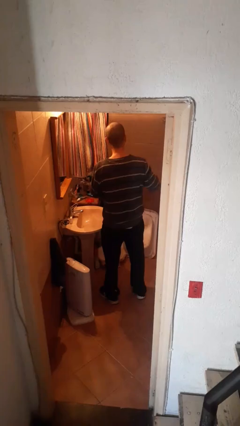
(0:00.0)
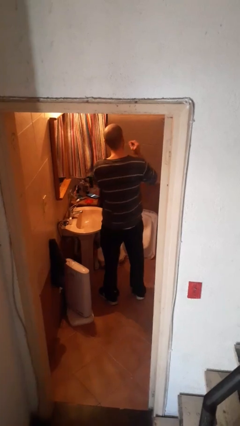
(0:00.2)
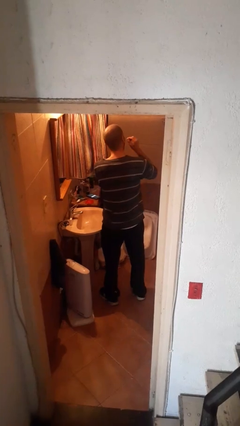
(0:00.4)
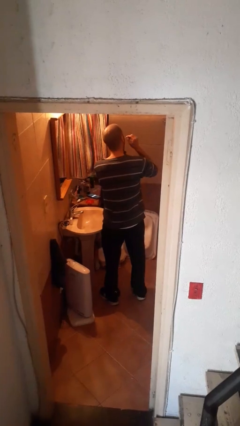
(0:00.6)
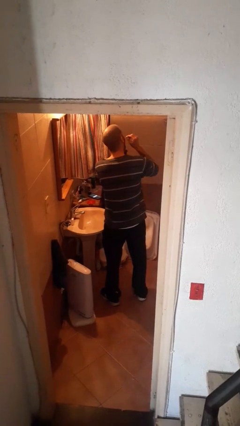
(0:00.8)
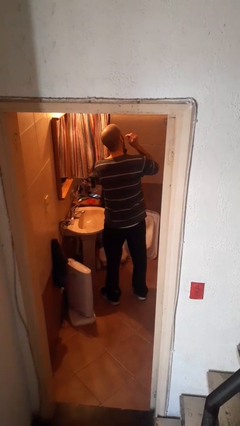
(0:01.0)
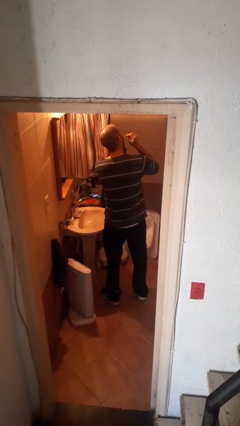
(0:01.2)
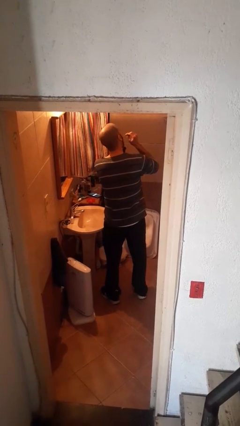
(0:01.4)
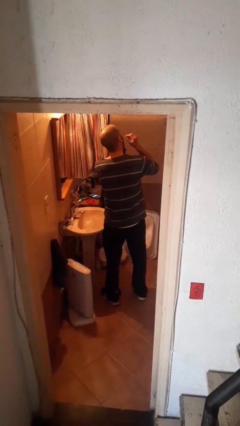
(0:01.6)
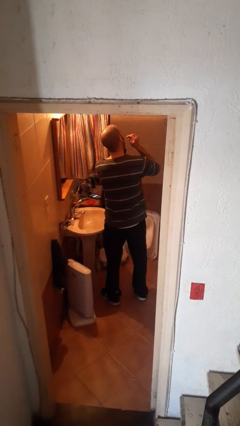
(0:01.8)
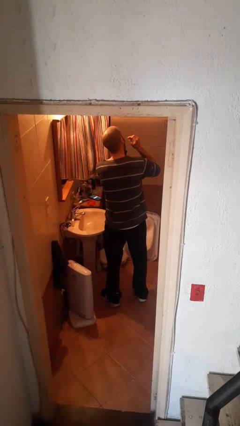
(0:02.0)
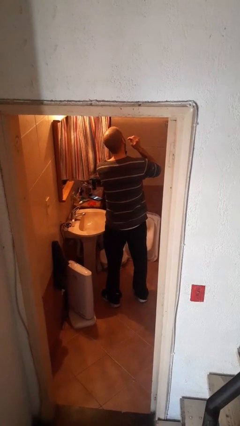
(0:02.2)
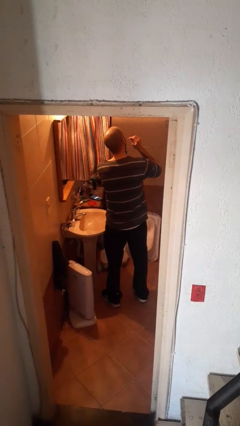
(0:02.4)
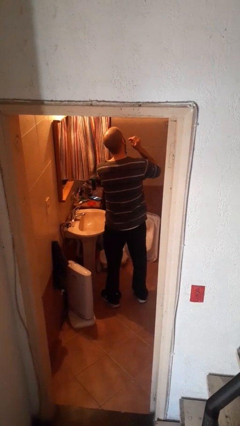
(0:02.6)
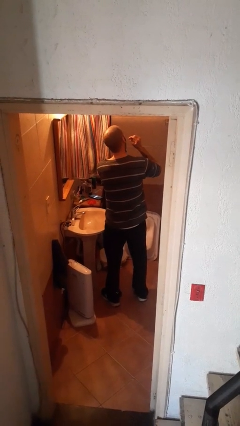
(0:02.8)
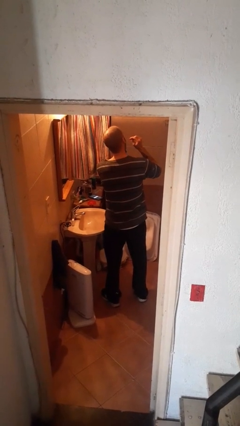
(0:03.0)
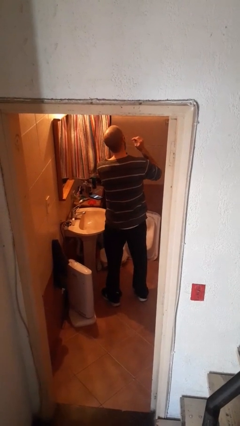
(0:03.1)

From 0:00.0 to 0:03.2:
person flosses

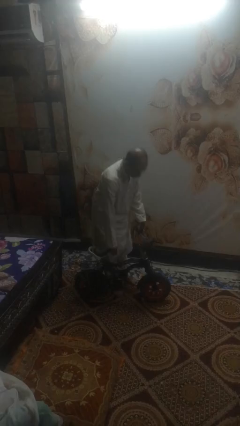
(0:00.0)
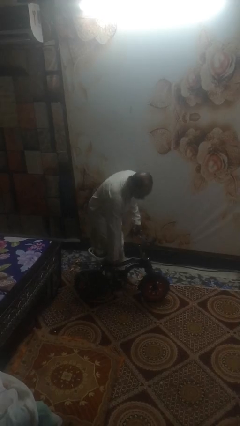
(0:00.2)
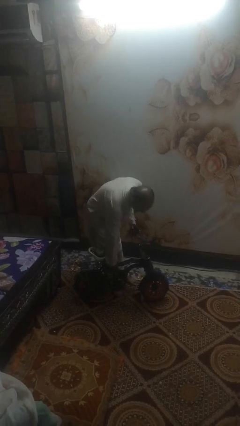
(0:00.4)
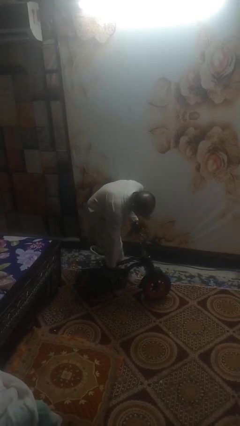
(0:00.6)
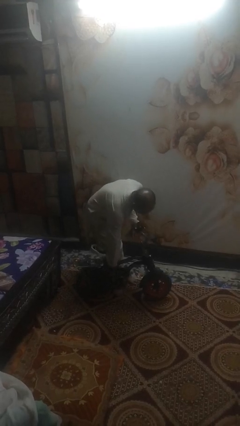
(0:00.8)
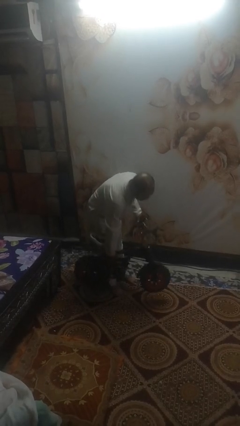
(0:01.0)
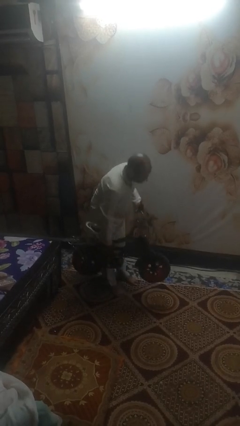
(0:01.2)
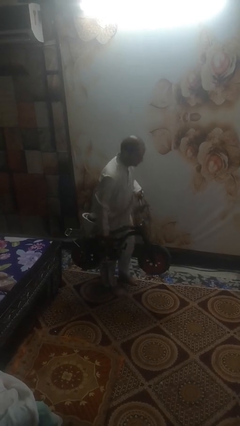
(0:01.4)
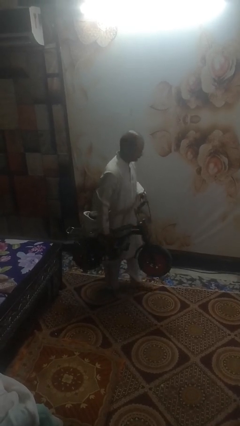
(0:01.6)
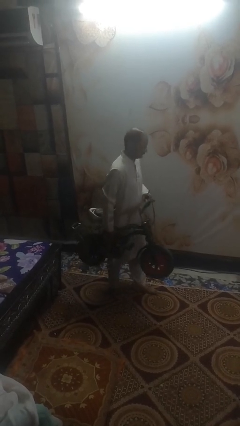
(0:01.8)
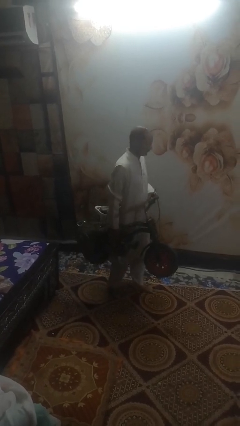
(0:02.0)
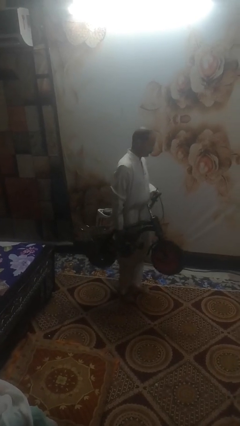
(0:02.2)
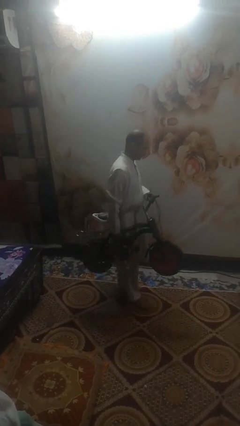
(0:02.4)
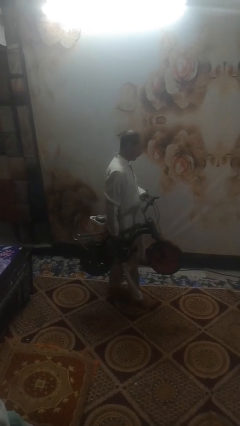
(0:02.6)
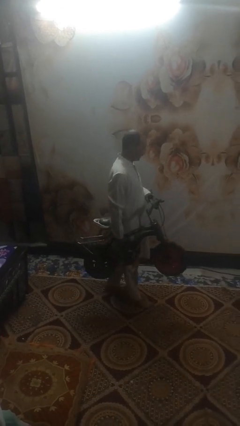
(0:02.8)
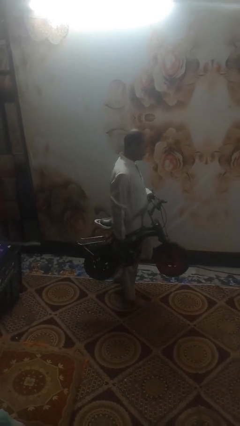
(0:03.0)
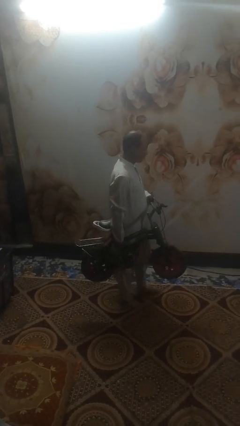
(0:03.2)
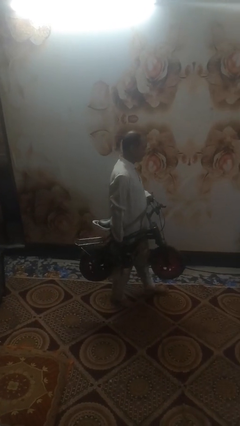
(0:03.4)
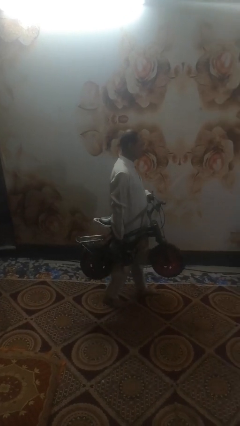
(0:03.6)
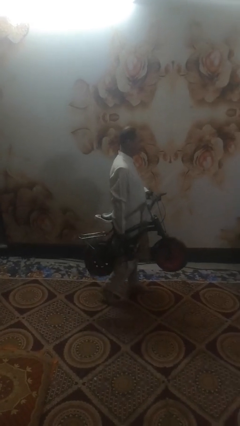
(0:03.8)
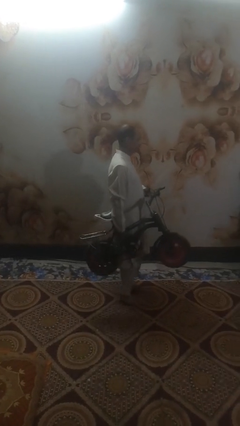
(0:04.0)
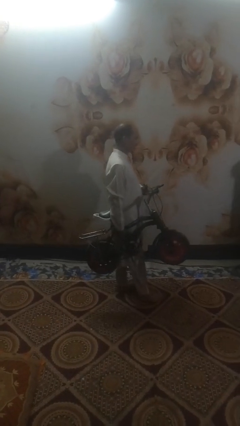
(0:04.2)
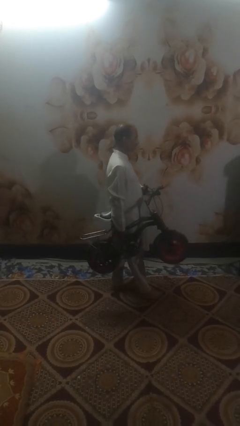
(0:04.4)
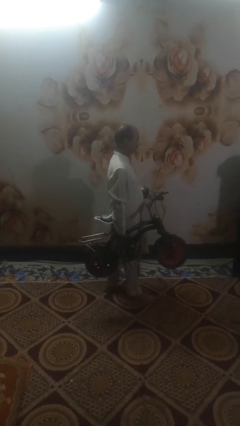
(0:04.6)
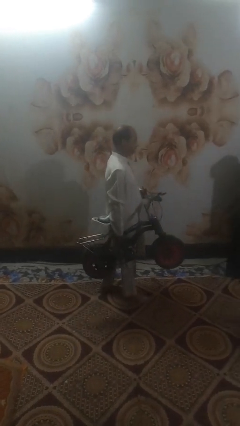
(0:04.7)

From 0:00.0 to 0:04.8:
person carries bicycle

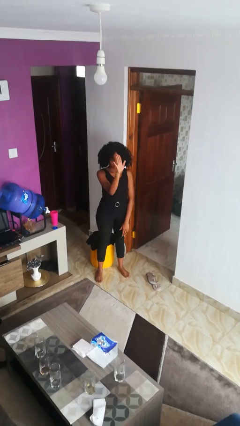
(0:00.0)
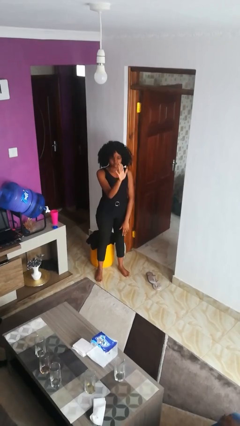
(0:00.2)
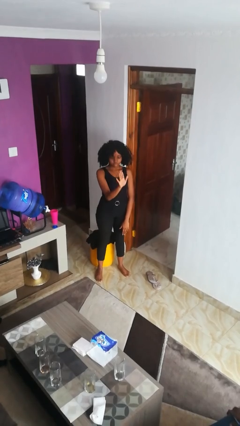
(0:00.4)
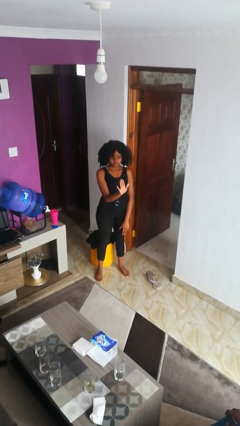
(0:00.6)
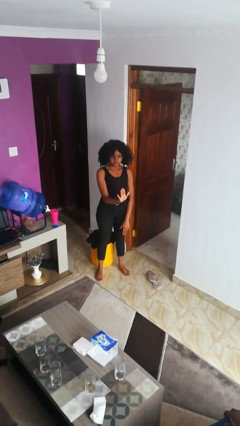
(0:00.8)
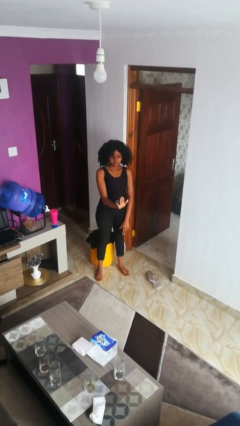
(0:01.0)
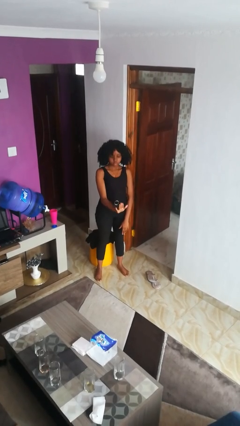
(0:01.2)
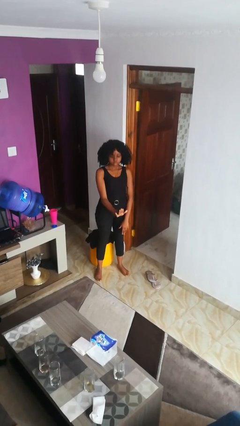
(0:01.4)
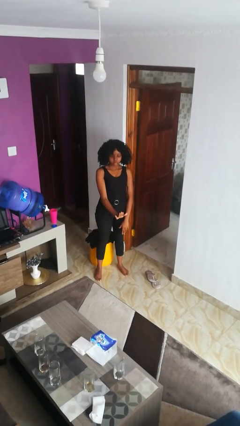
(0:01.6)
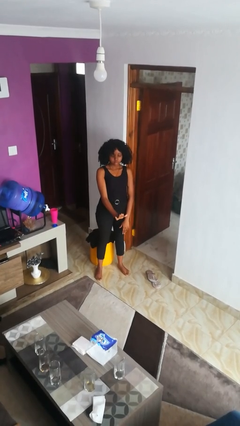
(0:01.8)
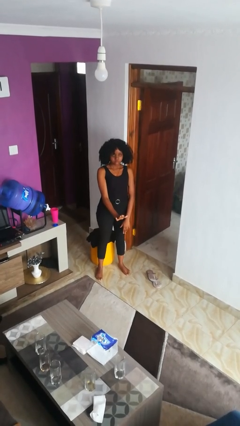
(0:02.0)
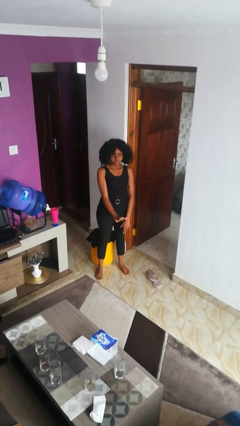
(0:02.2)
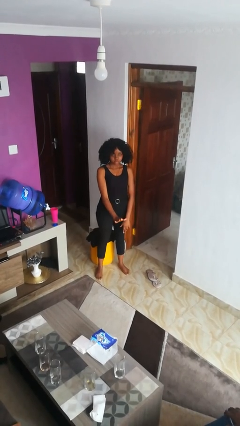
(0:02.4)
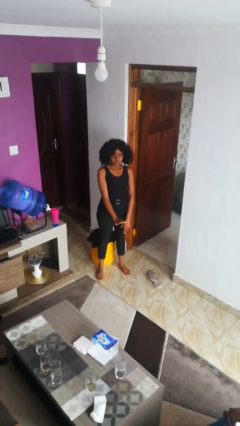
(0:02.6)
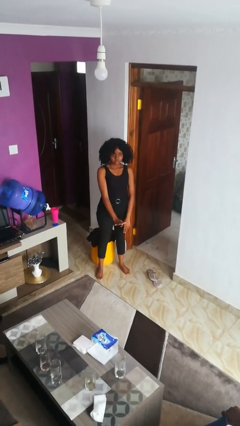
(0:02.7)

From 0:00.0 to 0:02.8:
person gestures swipe down

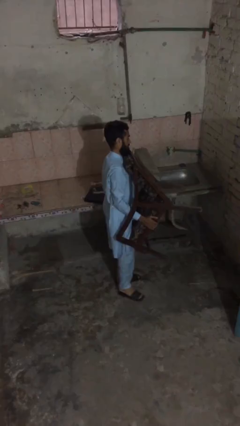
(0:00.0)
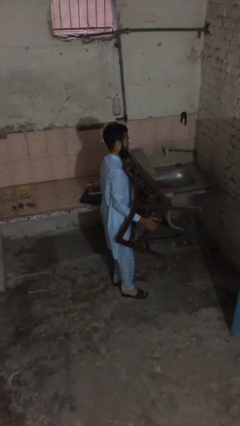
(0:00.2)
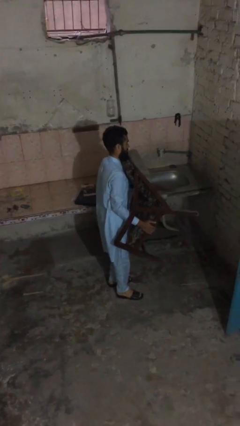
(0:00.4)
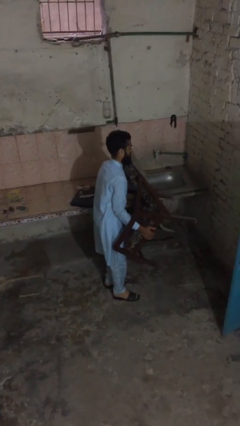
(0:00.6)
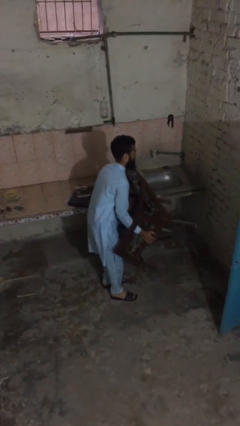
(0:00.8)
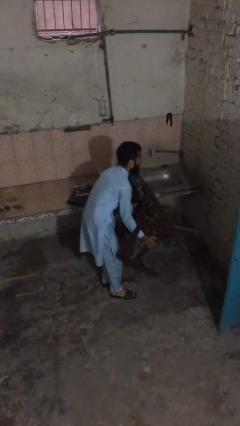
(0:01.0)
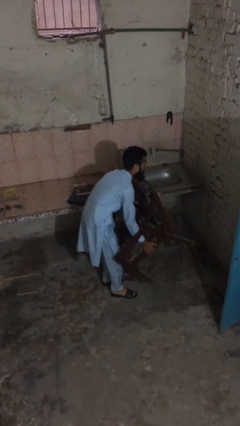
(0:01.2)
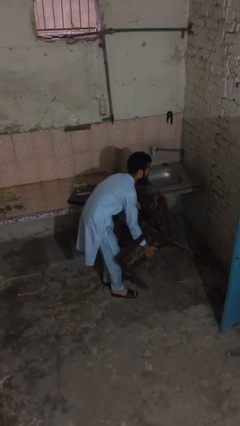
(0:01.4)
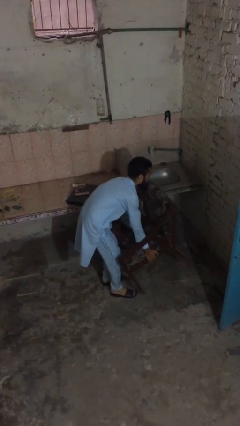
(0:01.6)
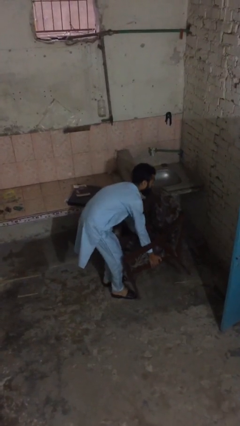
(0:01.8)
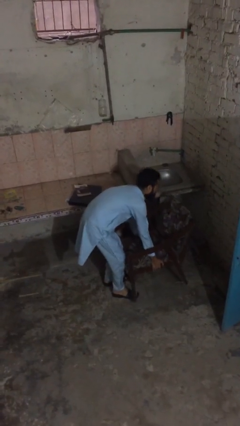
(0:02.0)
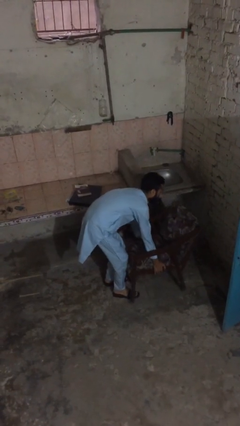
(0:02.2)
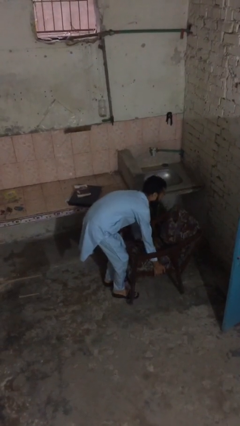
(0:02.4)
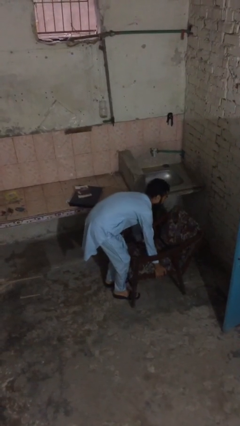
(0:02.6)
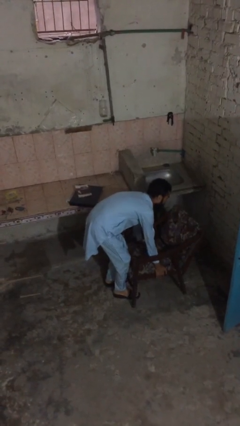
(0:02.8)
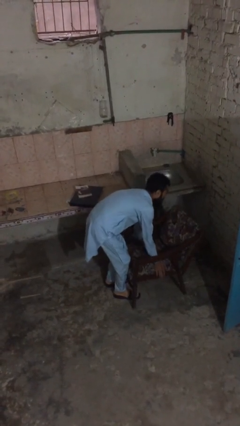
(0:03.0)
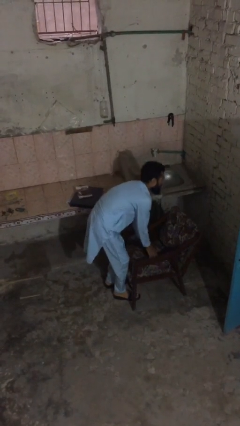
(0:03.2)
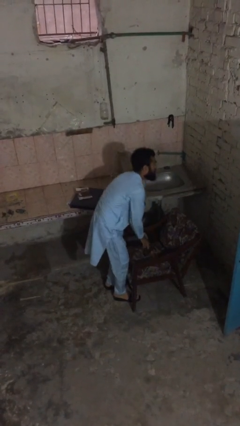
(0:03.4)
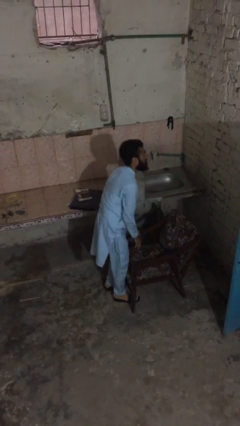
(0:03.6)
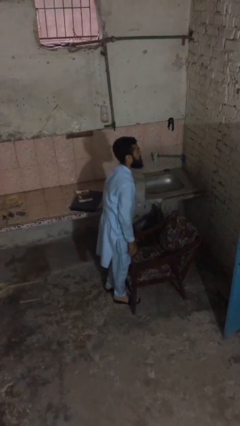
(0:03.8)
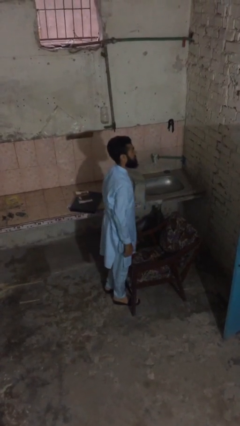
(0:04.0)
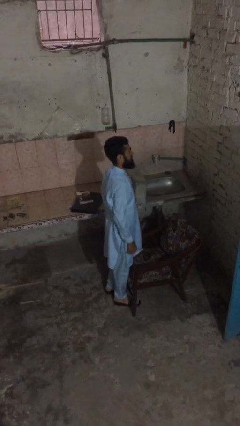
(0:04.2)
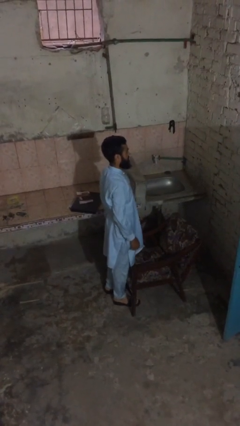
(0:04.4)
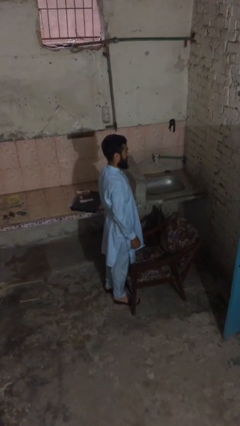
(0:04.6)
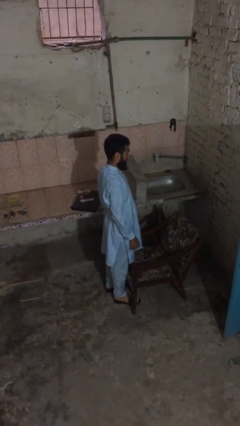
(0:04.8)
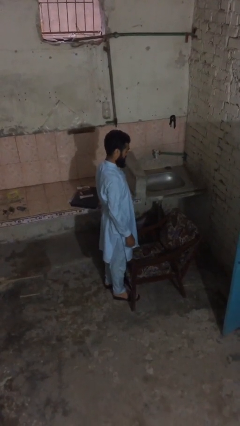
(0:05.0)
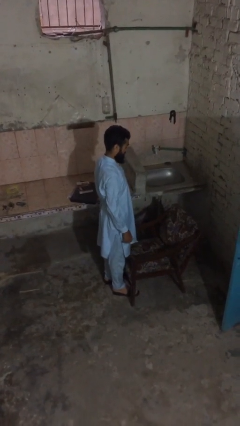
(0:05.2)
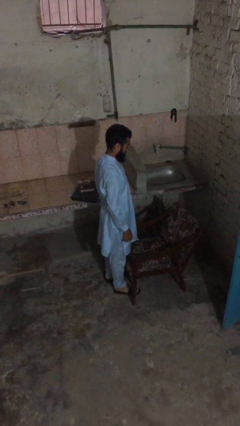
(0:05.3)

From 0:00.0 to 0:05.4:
person puts down object on floor

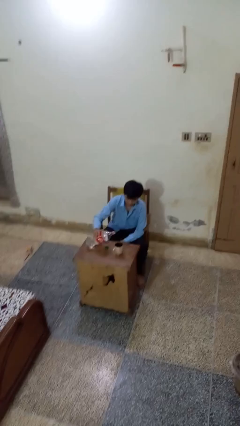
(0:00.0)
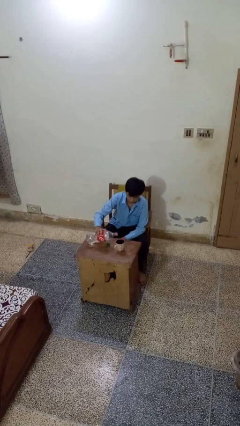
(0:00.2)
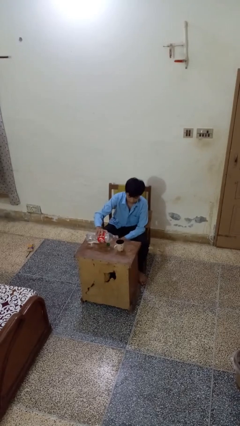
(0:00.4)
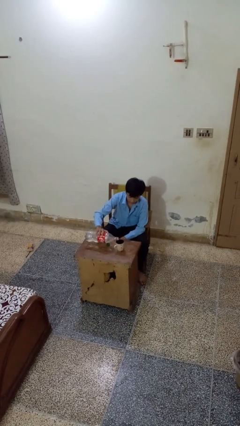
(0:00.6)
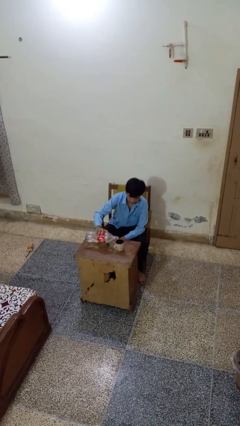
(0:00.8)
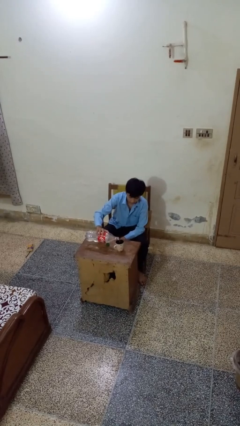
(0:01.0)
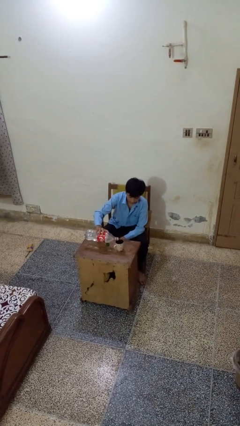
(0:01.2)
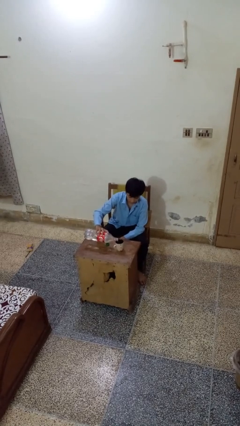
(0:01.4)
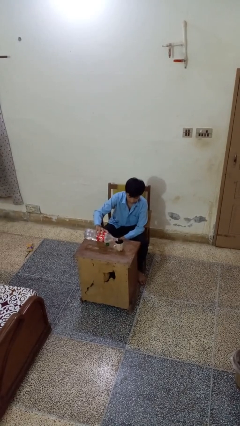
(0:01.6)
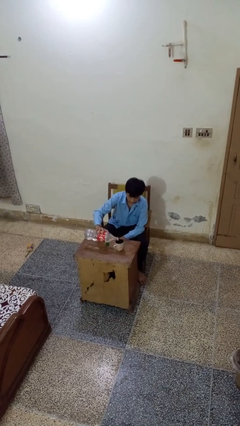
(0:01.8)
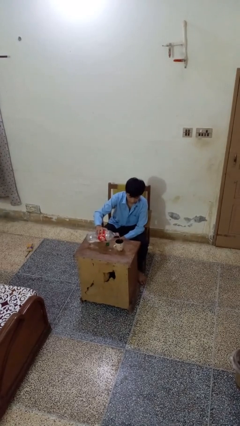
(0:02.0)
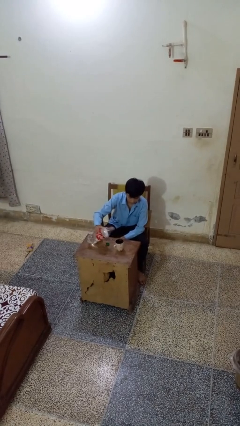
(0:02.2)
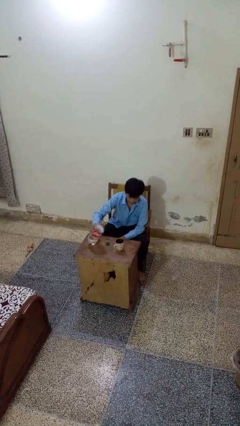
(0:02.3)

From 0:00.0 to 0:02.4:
person pours liquid into cup
